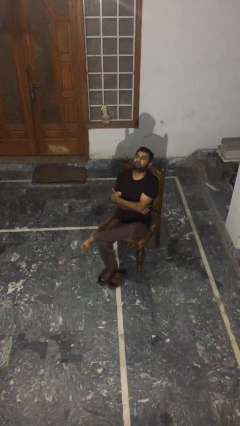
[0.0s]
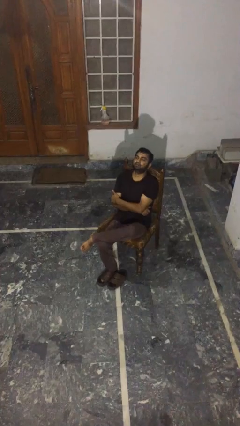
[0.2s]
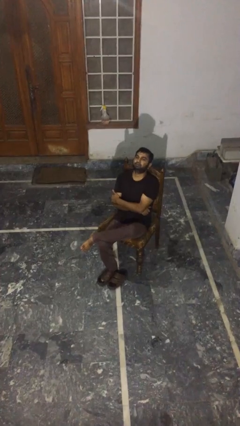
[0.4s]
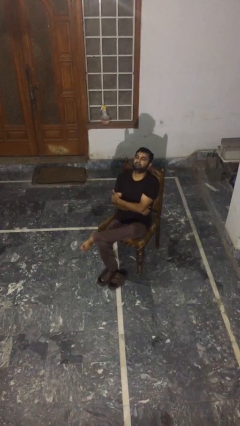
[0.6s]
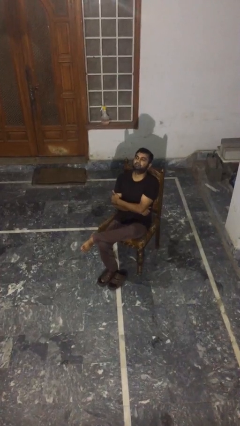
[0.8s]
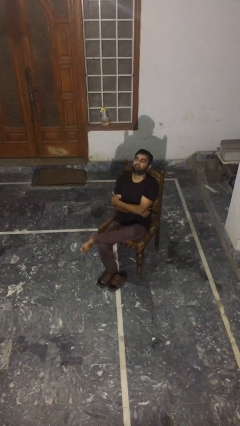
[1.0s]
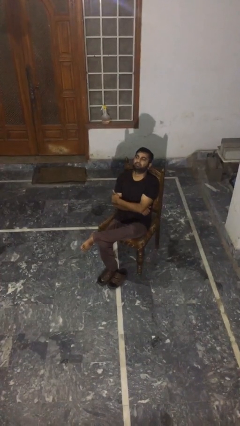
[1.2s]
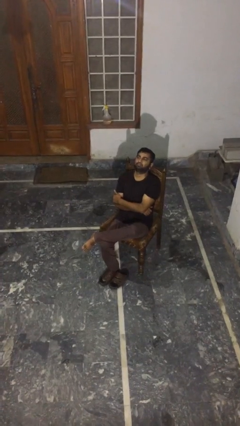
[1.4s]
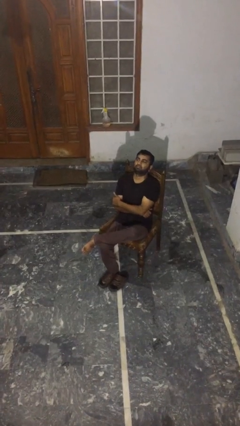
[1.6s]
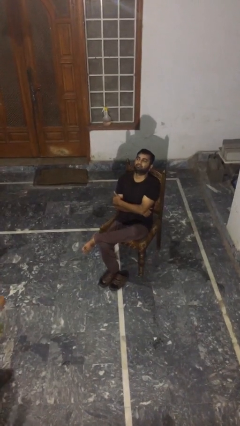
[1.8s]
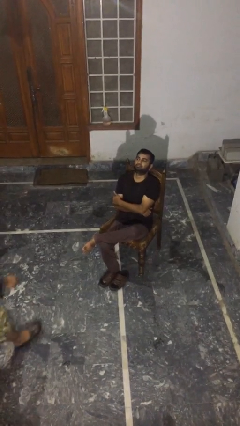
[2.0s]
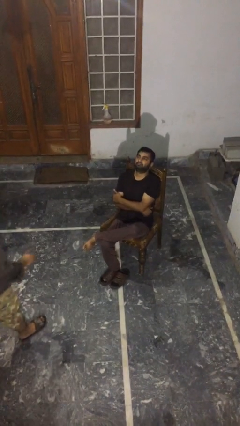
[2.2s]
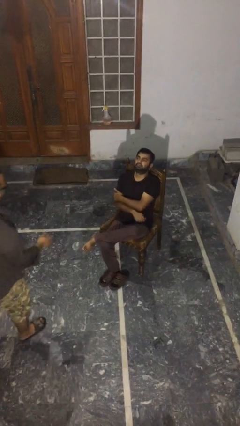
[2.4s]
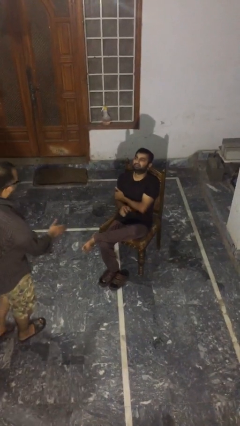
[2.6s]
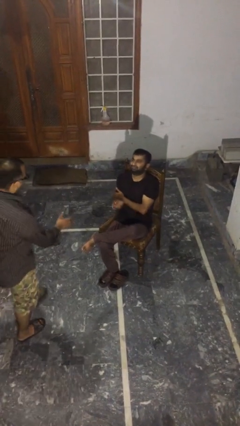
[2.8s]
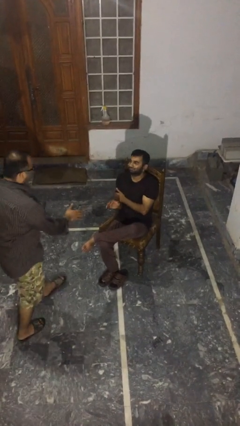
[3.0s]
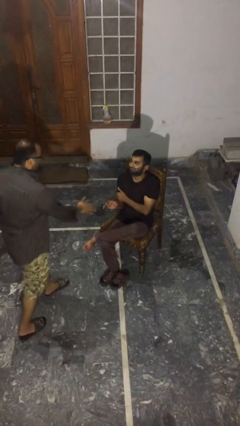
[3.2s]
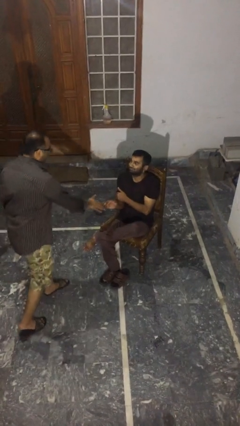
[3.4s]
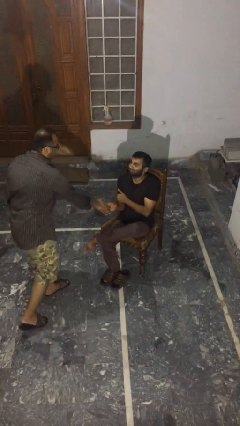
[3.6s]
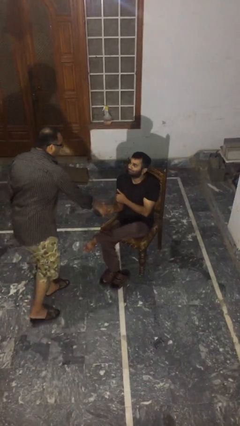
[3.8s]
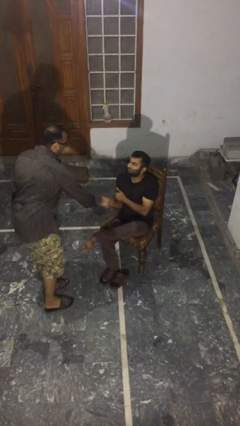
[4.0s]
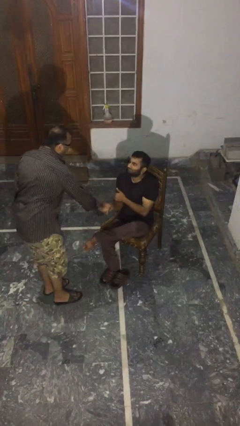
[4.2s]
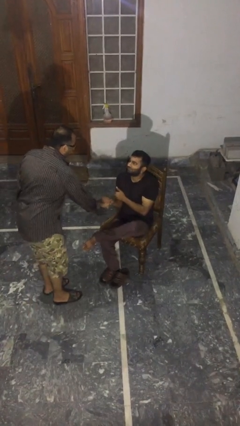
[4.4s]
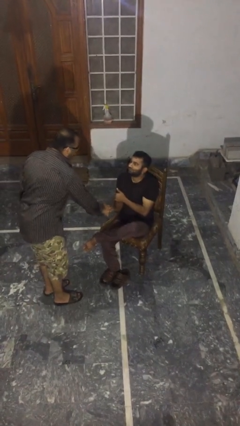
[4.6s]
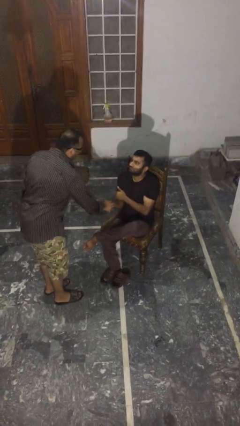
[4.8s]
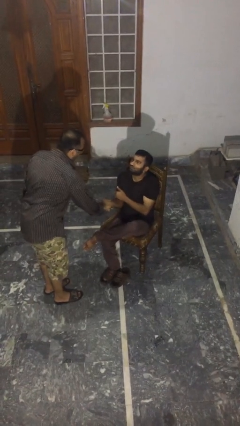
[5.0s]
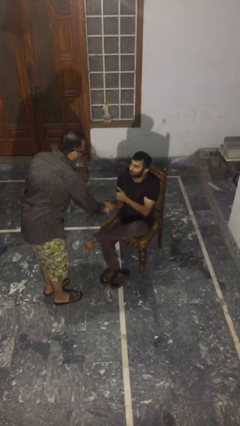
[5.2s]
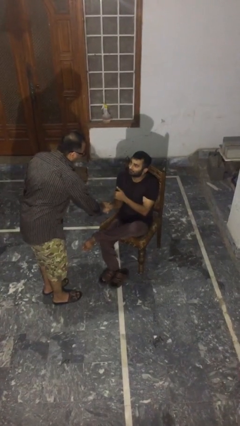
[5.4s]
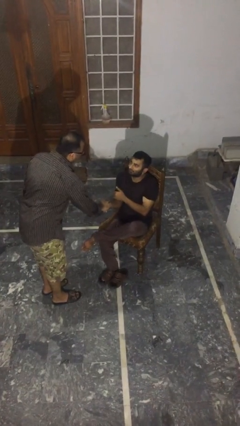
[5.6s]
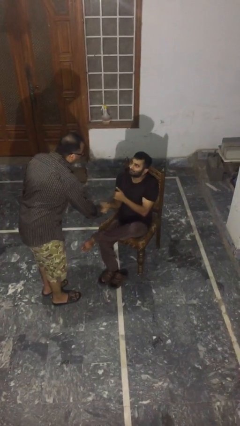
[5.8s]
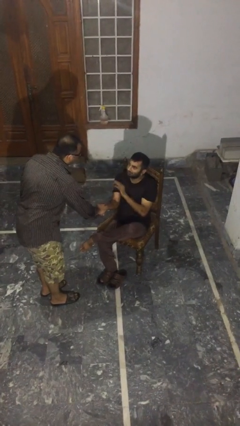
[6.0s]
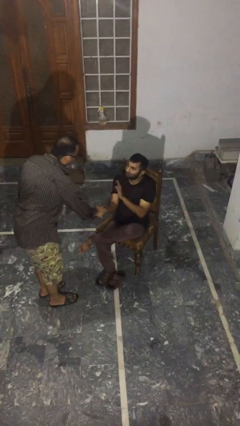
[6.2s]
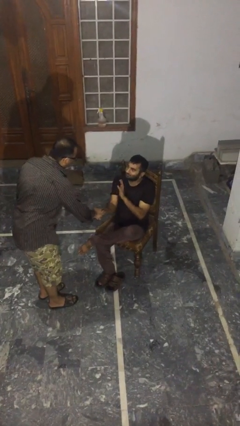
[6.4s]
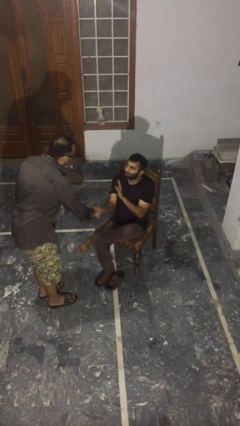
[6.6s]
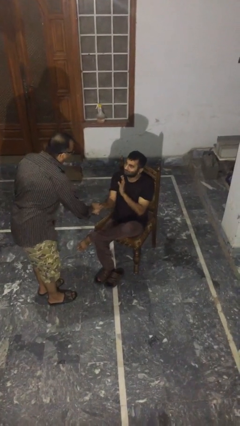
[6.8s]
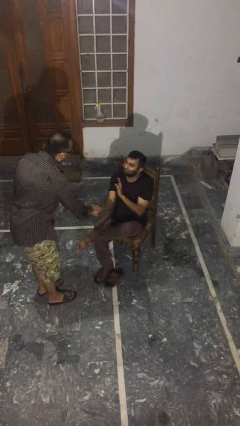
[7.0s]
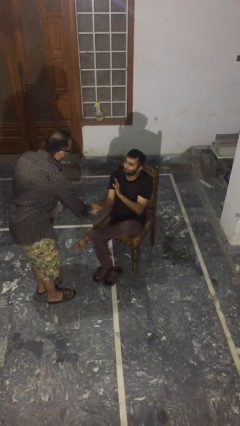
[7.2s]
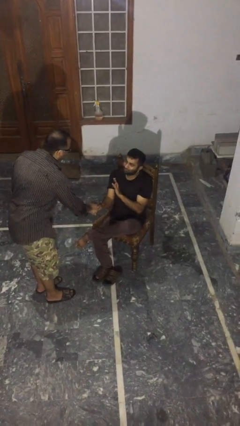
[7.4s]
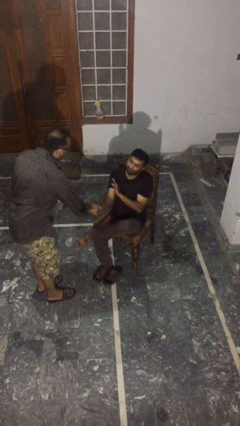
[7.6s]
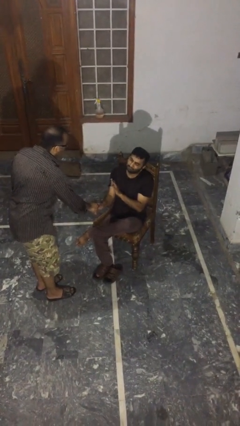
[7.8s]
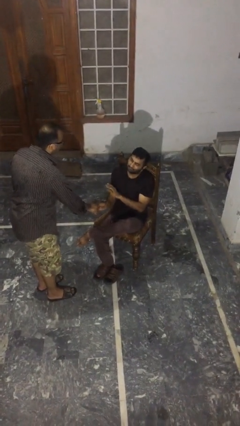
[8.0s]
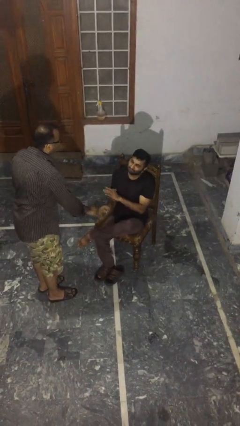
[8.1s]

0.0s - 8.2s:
person shakes hand

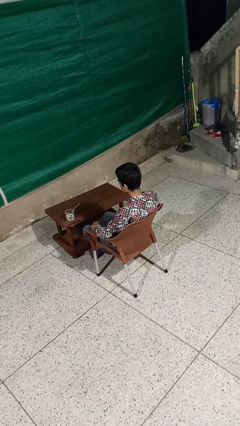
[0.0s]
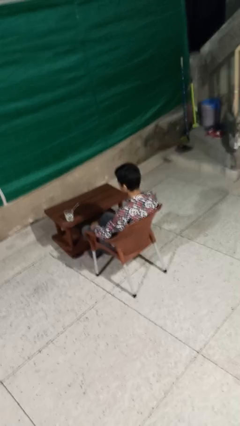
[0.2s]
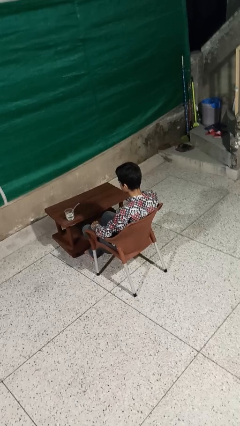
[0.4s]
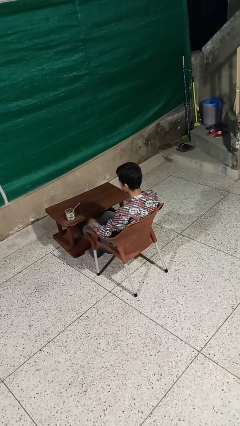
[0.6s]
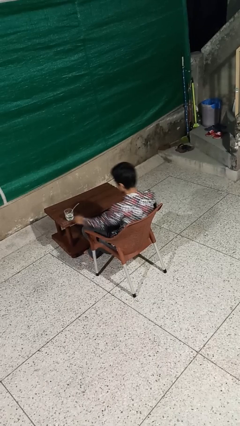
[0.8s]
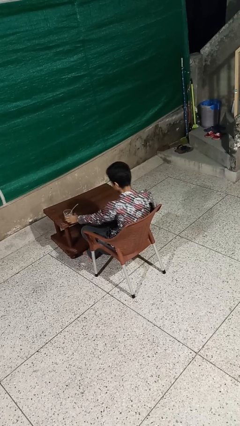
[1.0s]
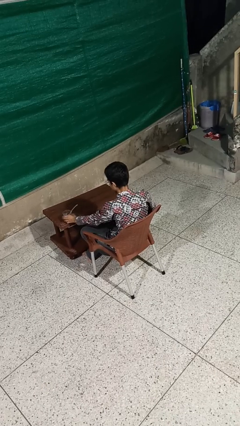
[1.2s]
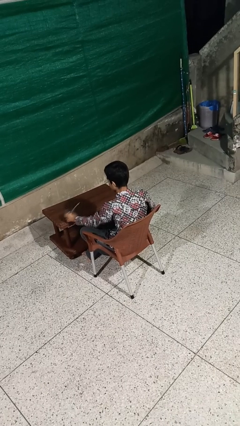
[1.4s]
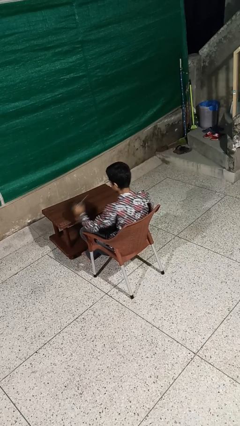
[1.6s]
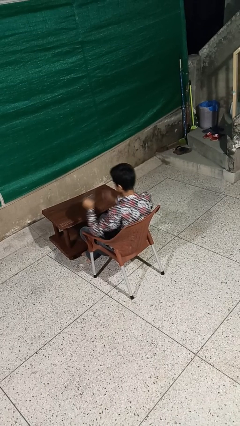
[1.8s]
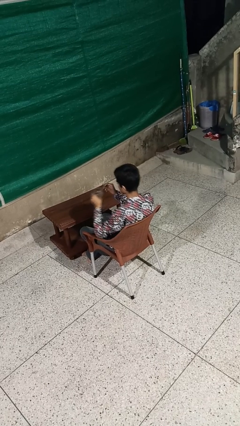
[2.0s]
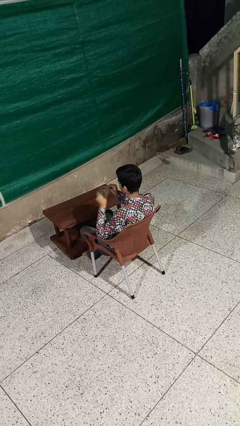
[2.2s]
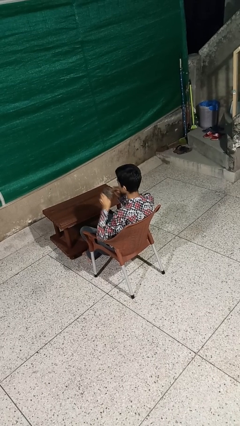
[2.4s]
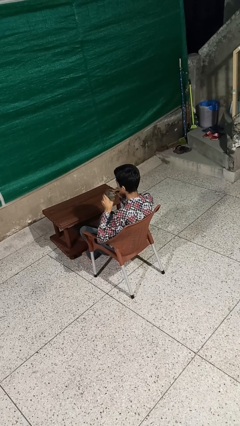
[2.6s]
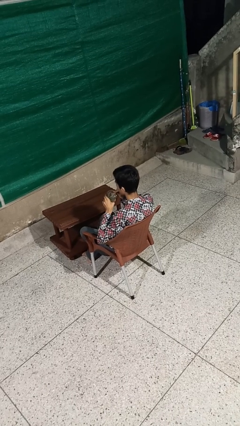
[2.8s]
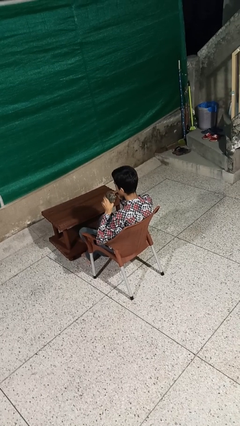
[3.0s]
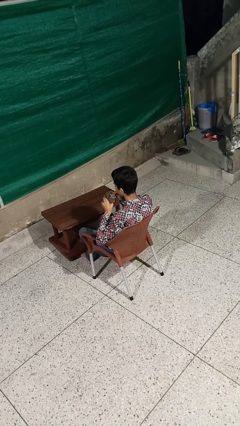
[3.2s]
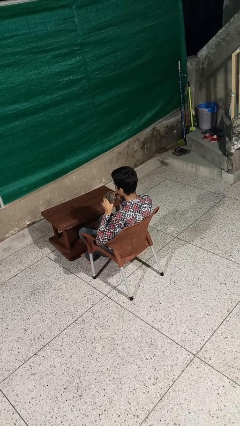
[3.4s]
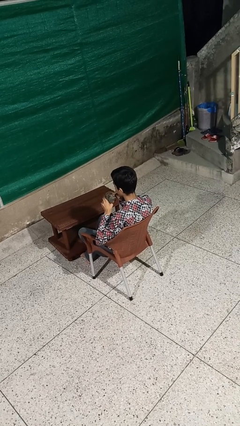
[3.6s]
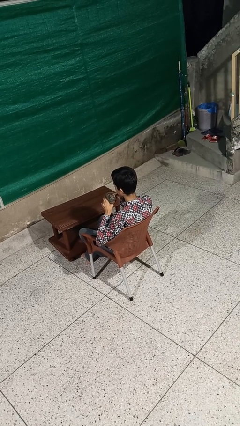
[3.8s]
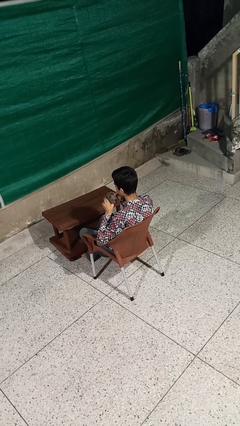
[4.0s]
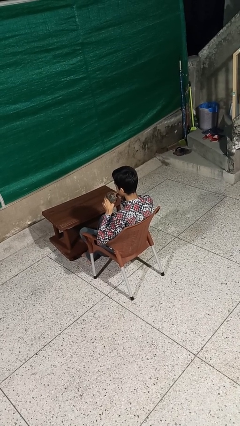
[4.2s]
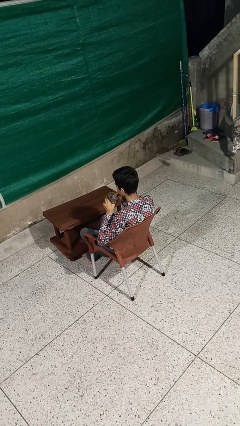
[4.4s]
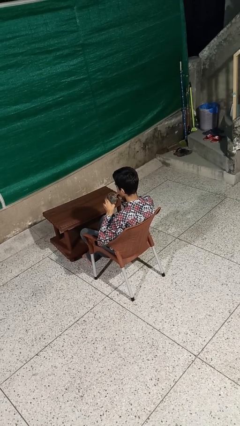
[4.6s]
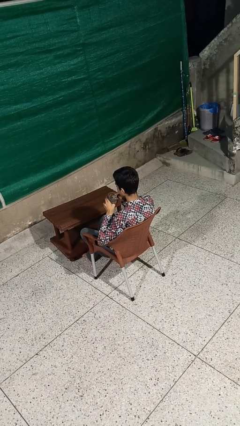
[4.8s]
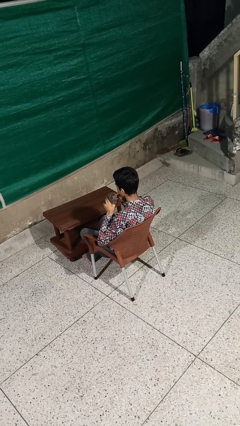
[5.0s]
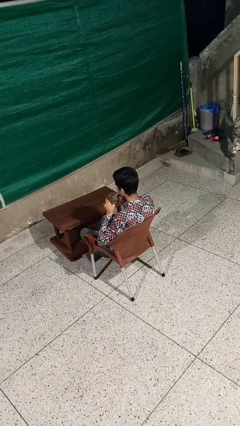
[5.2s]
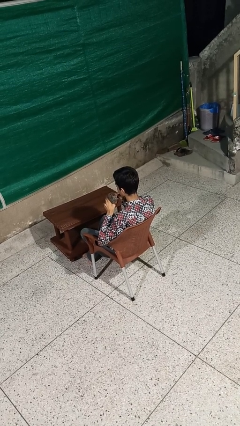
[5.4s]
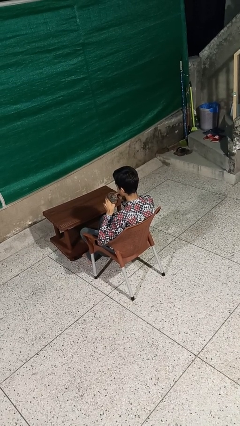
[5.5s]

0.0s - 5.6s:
person drinks from straw

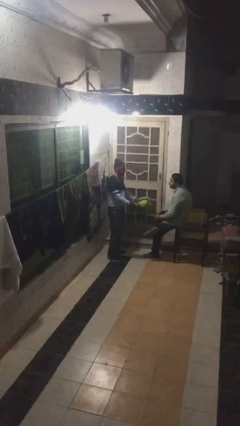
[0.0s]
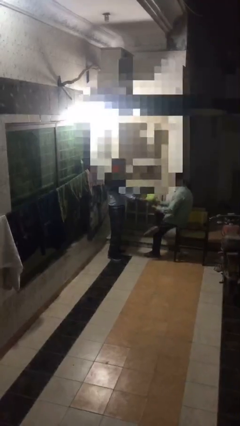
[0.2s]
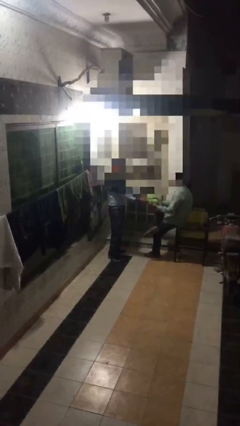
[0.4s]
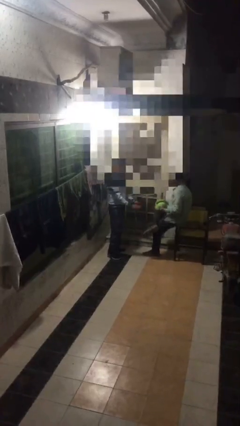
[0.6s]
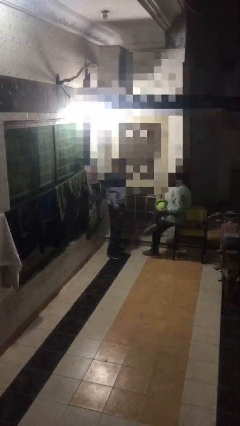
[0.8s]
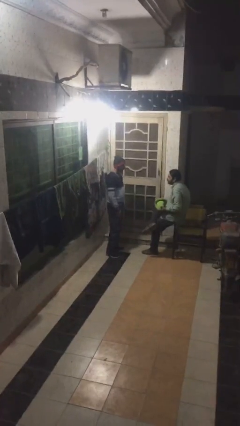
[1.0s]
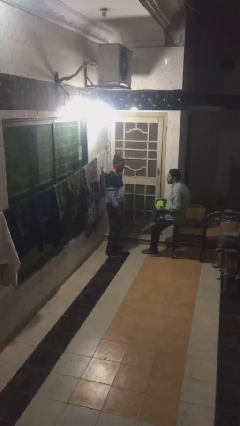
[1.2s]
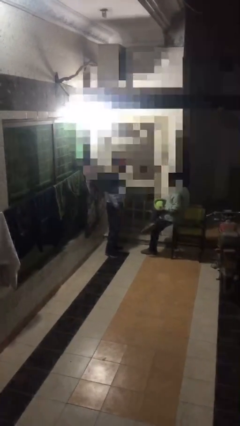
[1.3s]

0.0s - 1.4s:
person transfers object to person

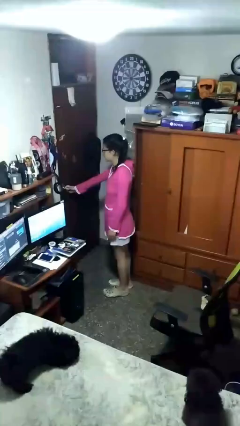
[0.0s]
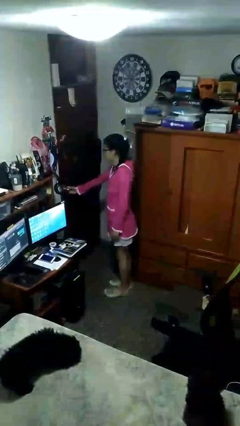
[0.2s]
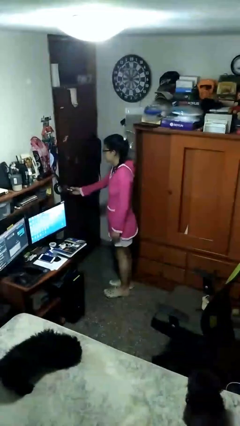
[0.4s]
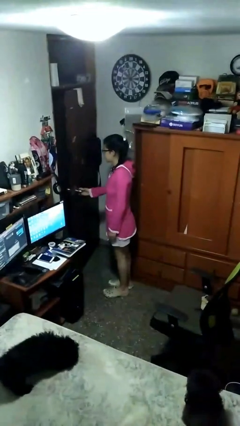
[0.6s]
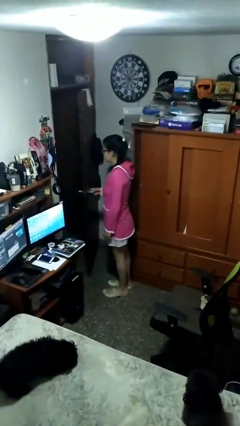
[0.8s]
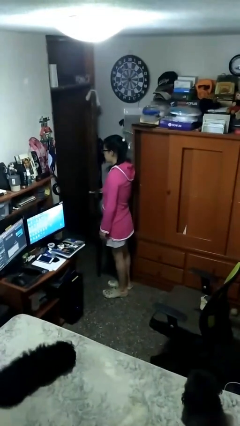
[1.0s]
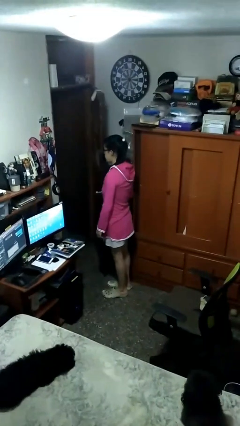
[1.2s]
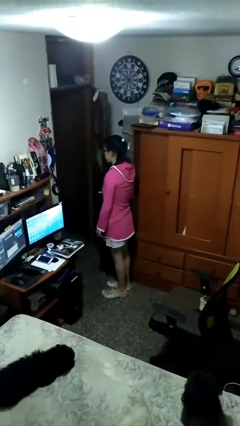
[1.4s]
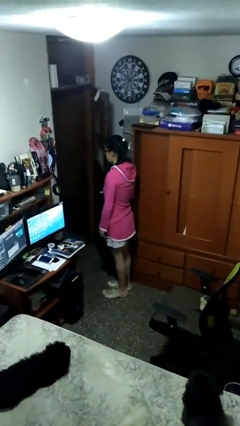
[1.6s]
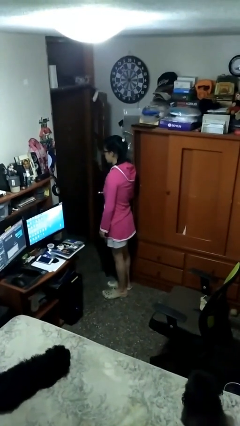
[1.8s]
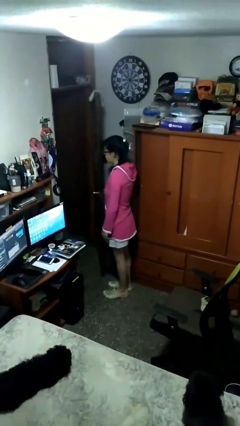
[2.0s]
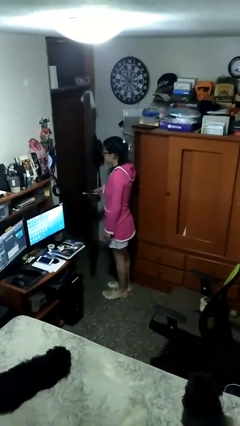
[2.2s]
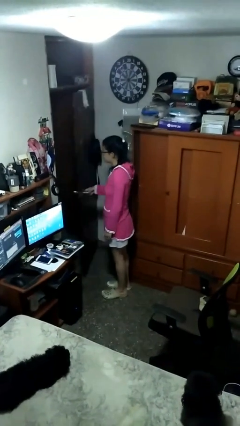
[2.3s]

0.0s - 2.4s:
person opens facility door

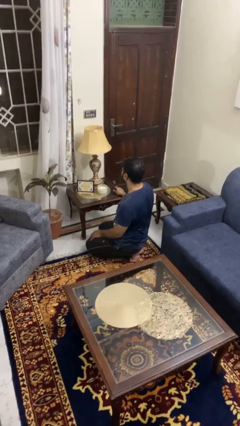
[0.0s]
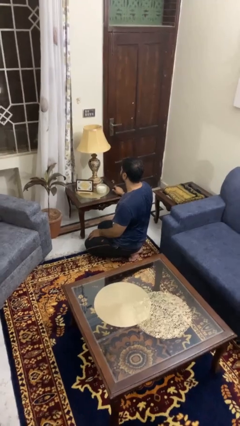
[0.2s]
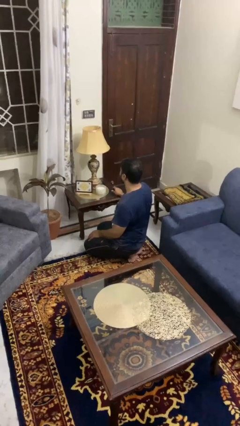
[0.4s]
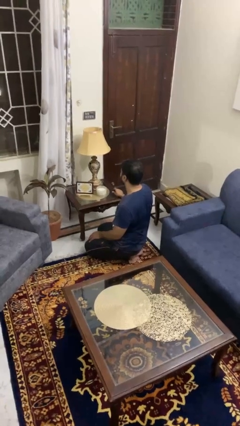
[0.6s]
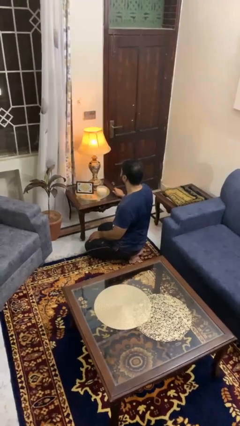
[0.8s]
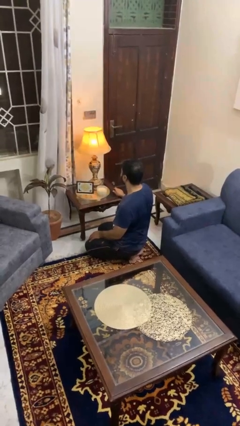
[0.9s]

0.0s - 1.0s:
person turns on lamp
